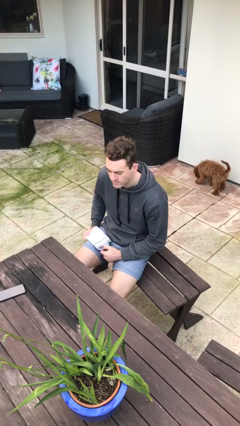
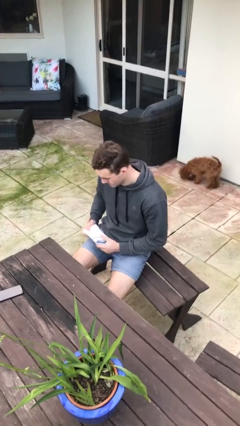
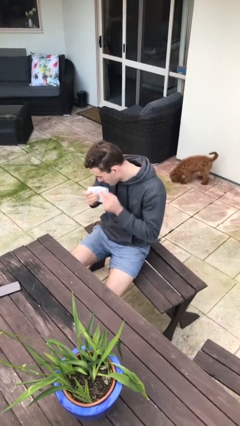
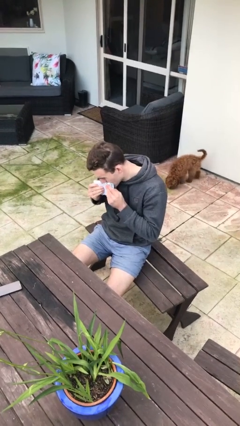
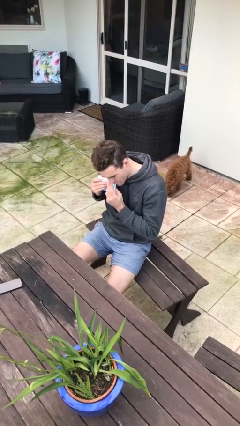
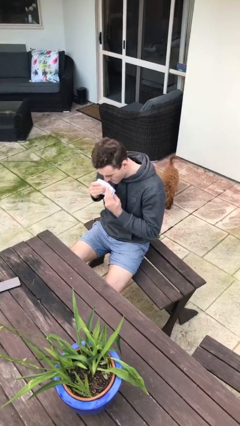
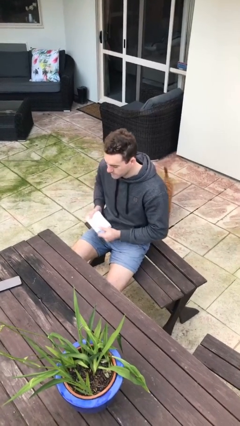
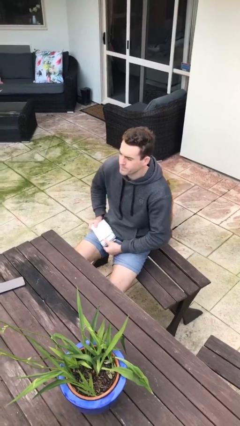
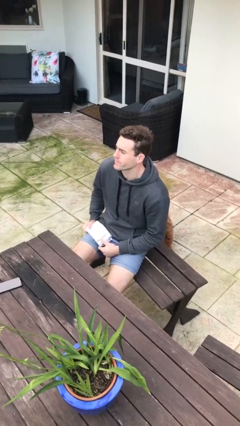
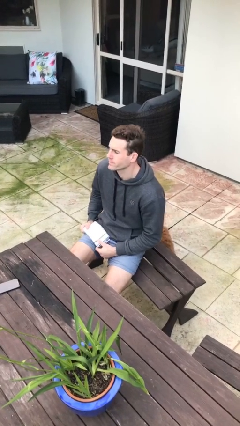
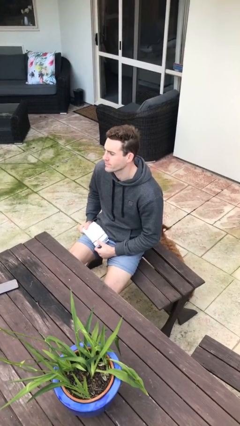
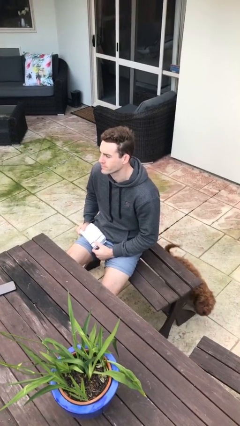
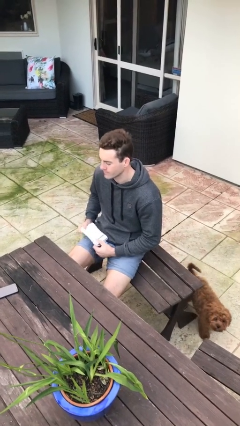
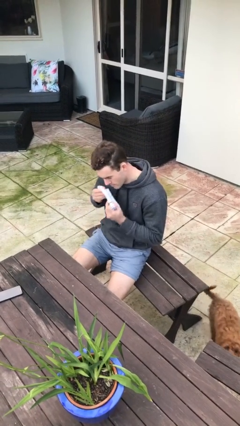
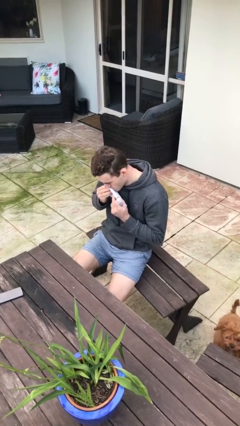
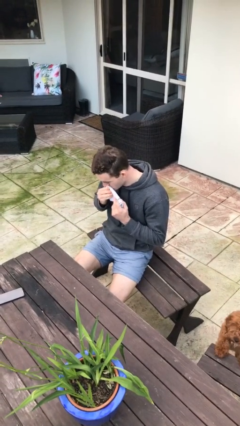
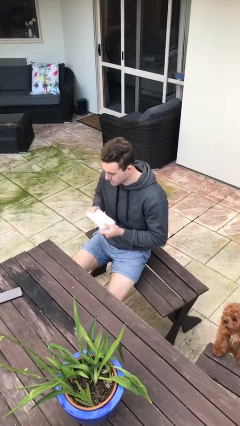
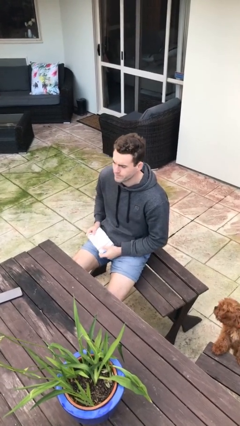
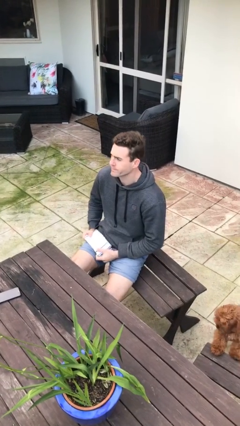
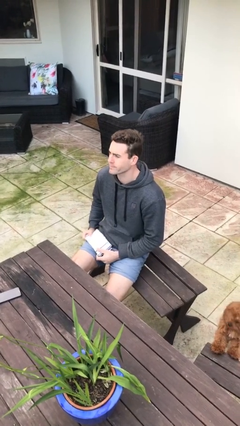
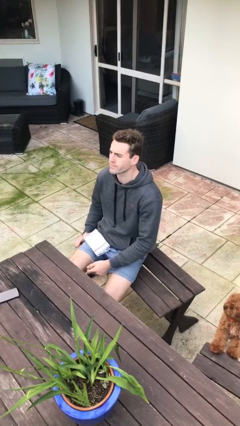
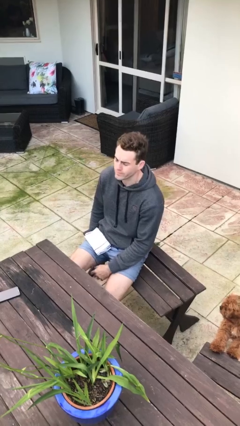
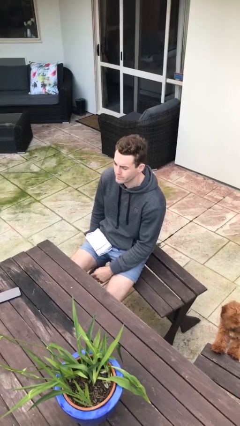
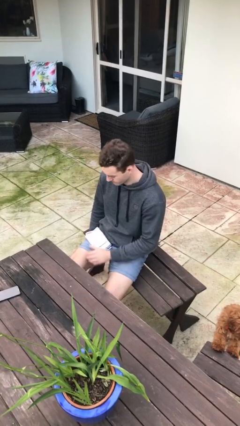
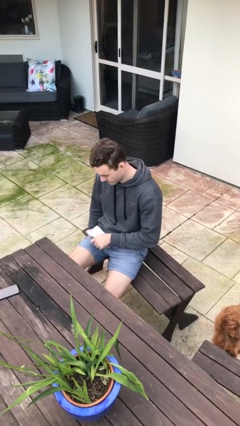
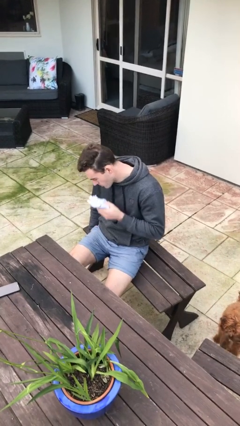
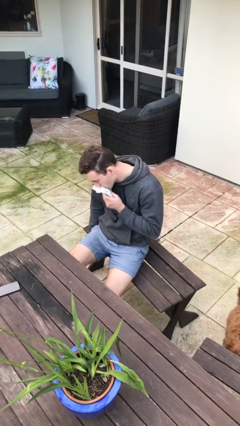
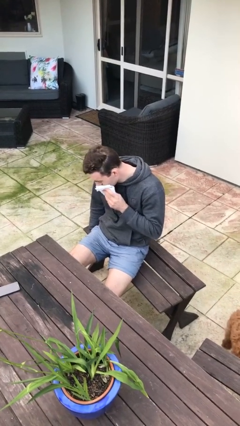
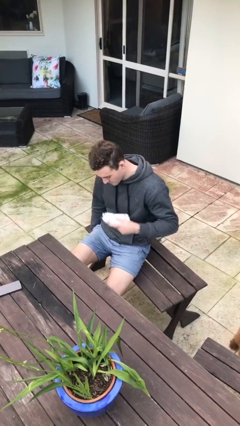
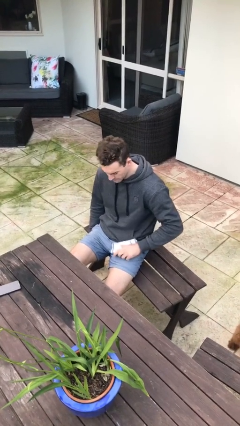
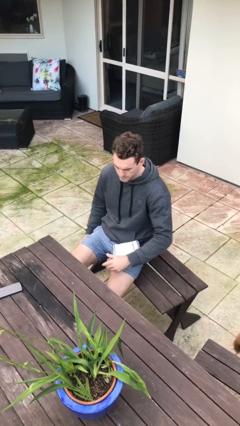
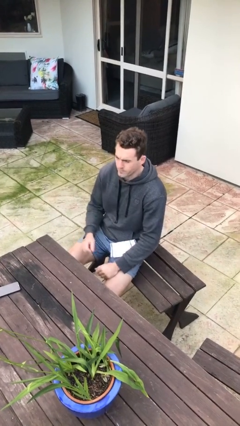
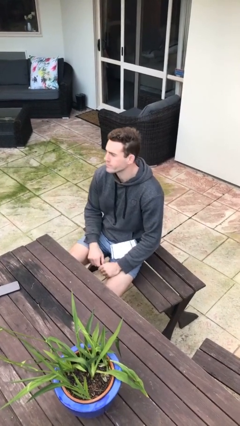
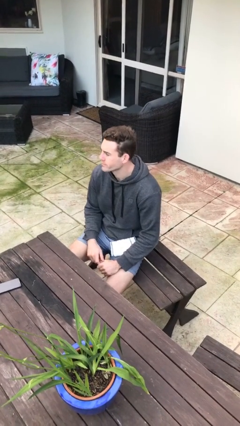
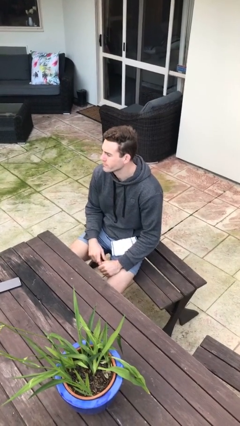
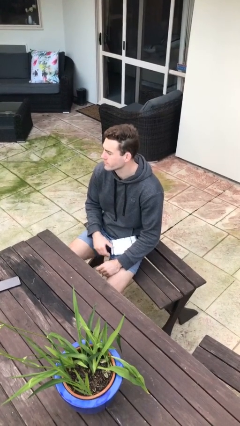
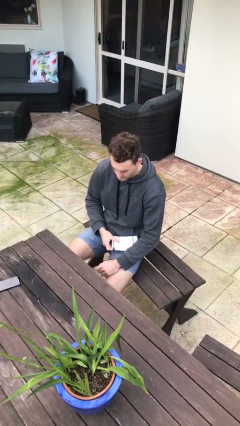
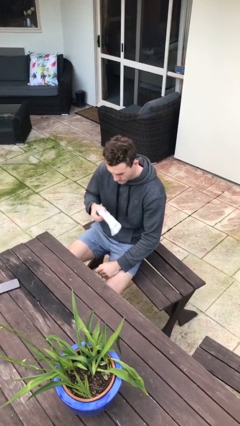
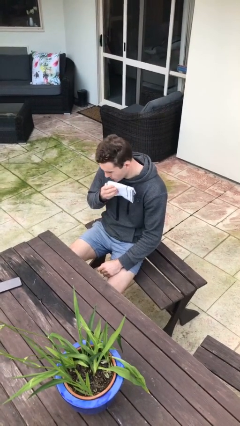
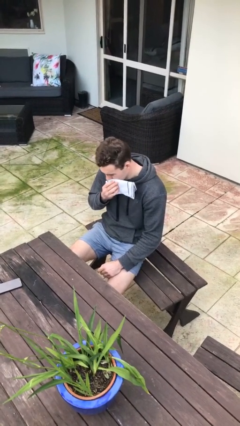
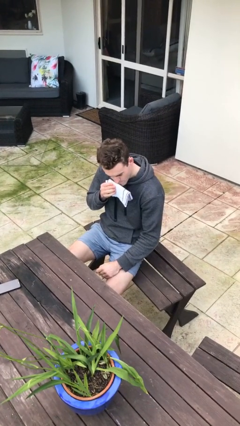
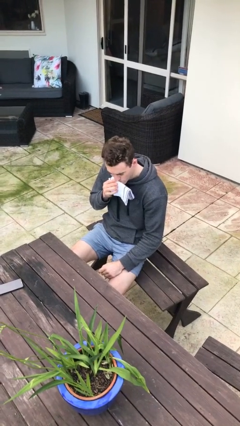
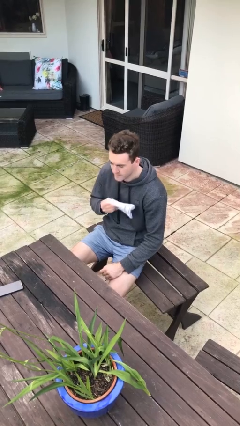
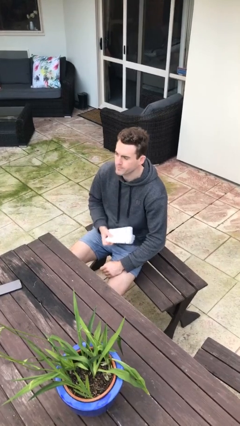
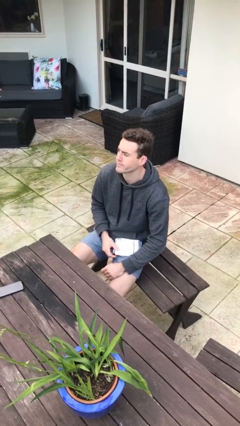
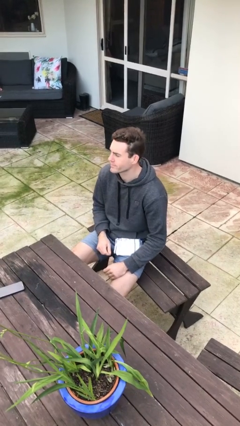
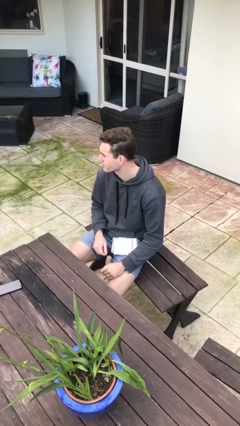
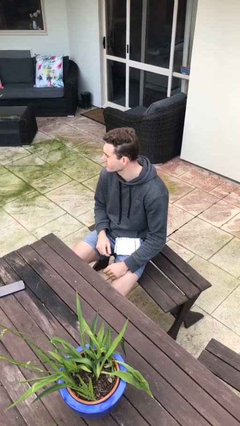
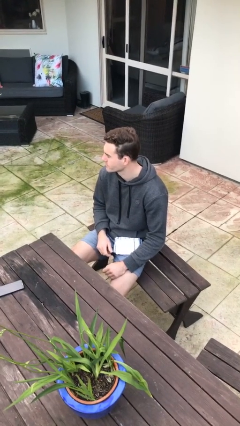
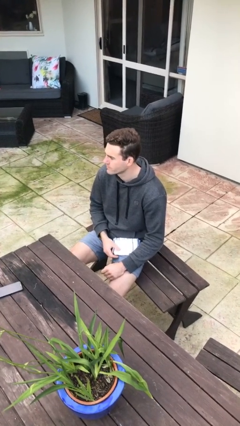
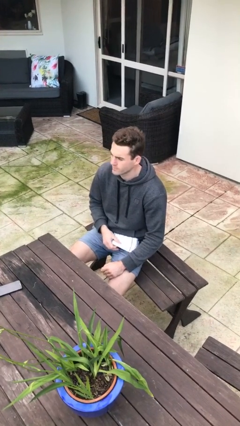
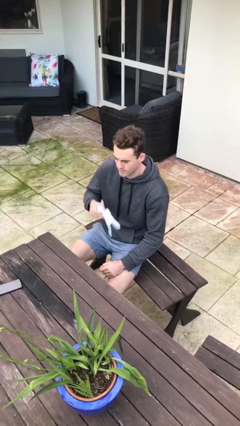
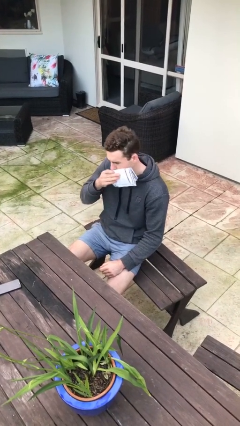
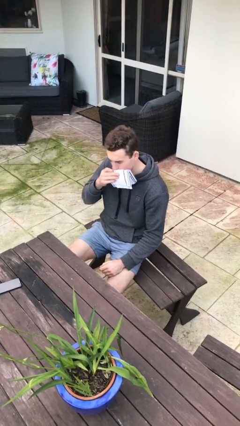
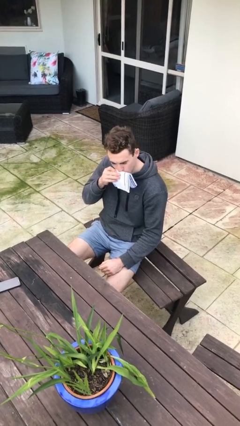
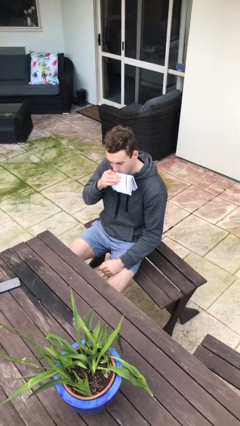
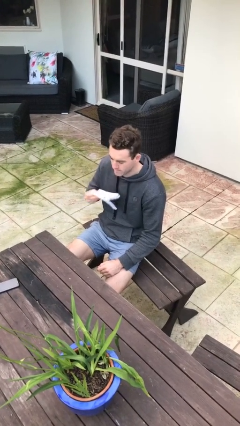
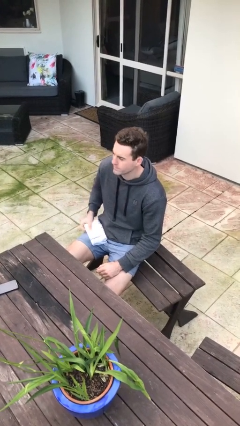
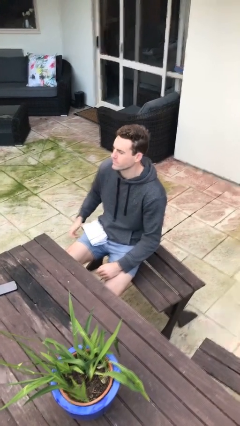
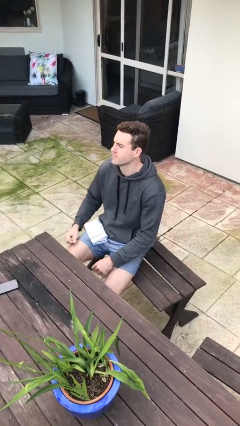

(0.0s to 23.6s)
person wipes mouth with napkin

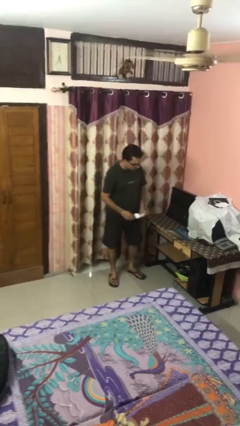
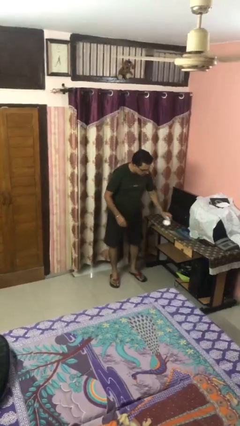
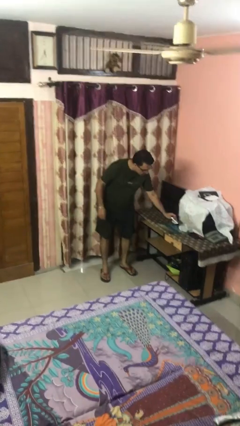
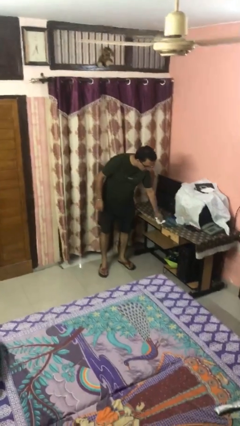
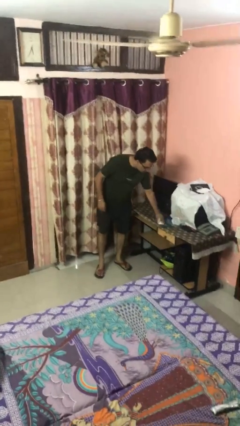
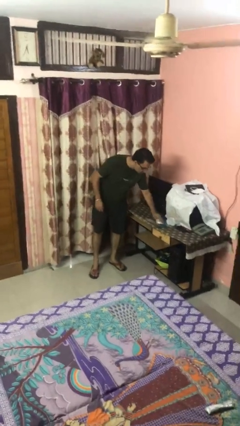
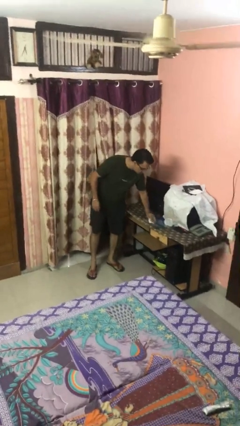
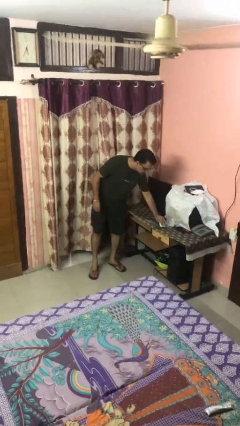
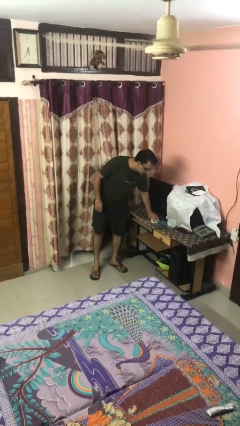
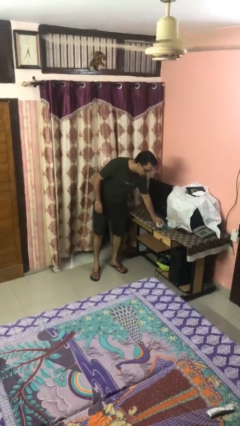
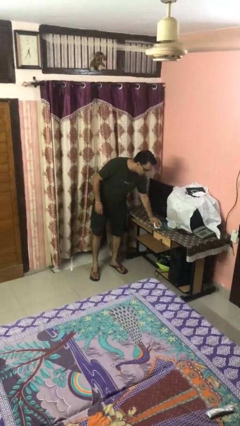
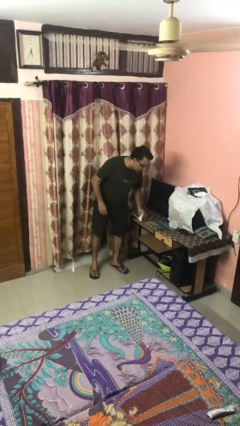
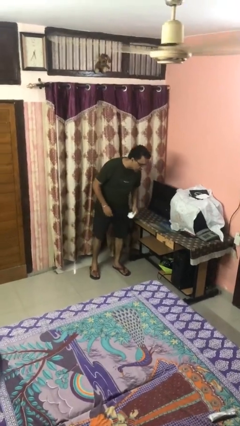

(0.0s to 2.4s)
person cleans table with rag

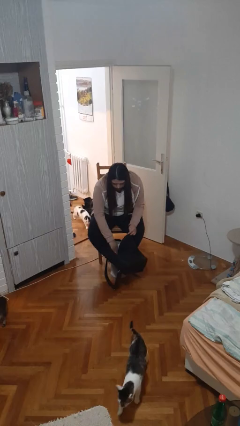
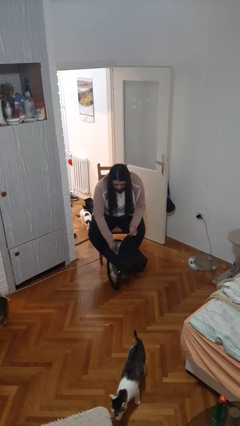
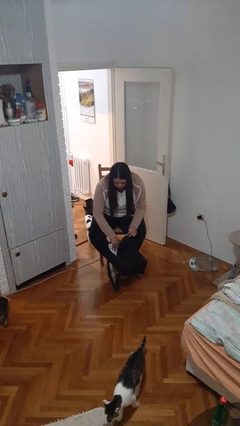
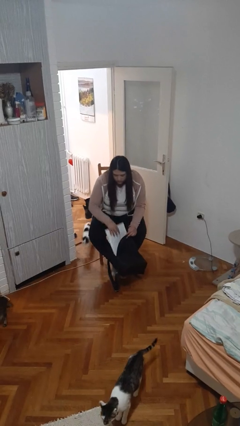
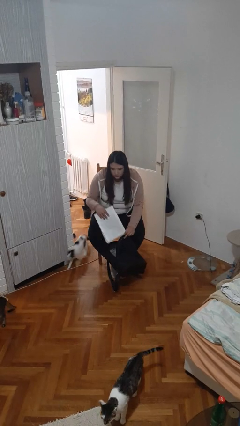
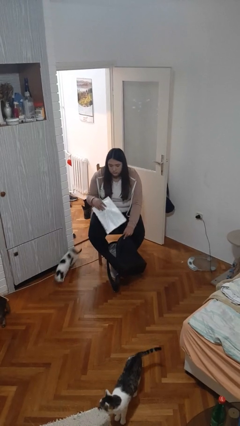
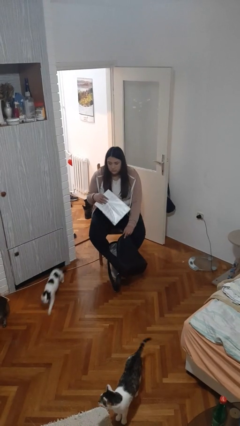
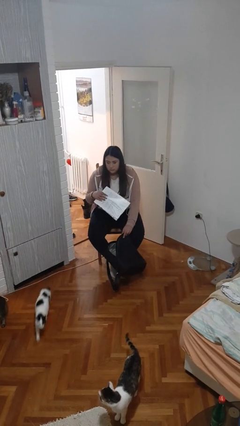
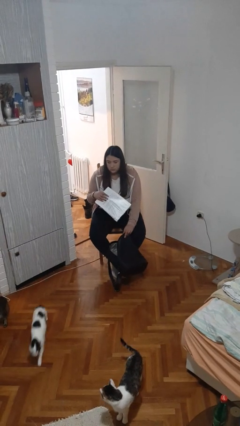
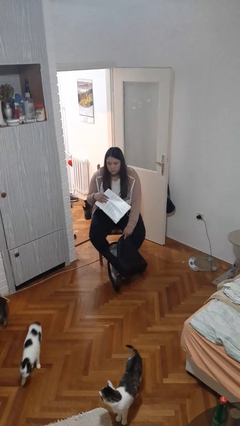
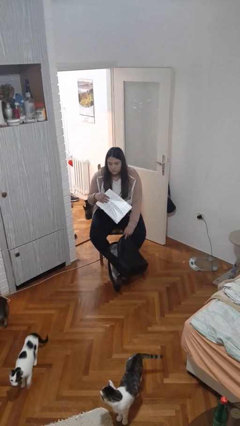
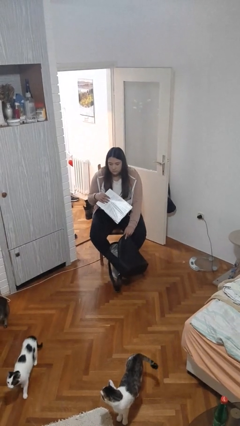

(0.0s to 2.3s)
person takes object from backpack

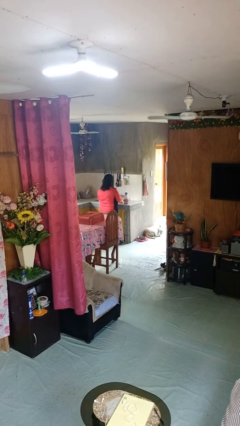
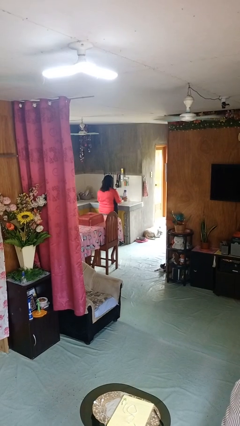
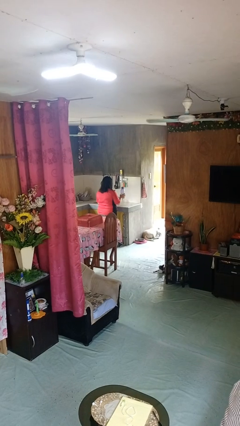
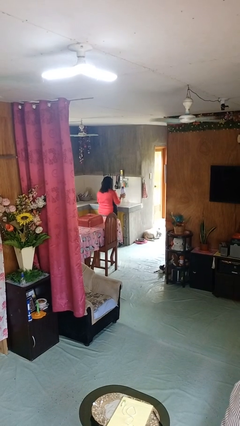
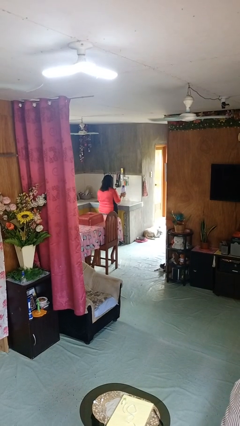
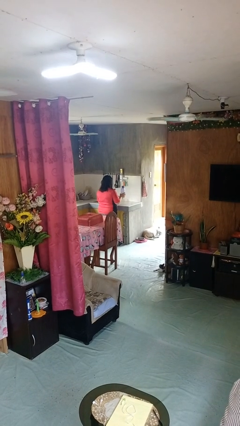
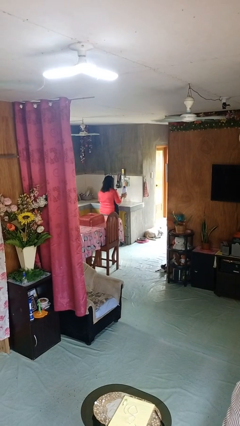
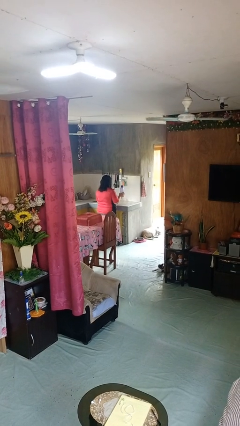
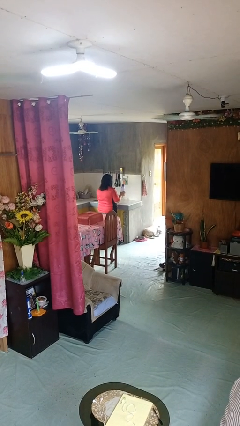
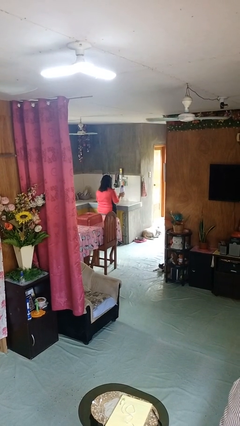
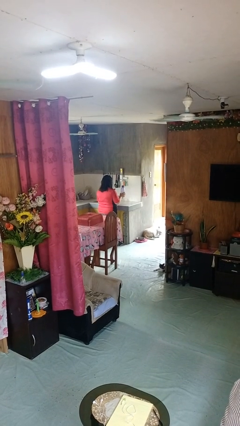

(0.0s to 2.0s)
person picks up object from countertop
